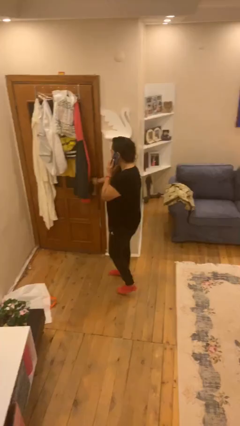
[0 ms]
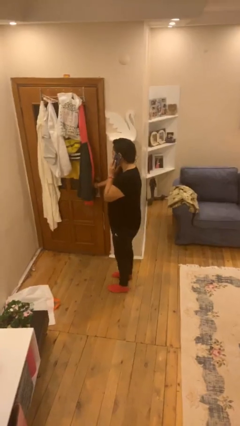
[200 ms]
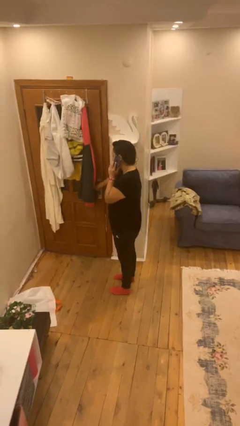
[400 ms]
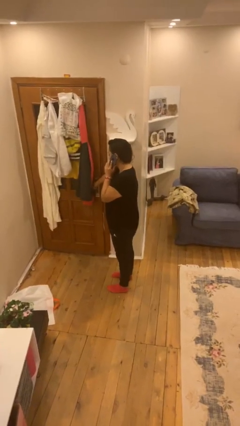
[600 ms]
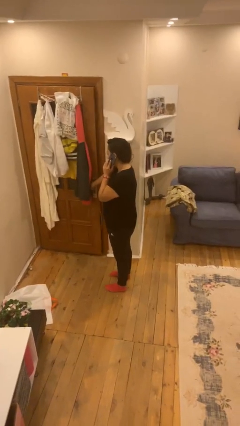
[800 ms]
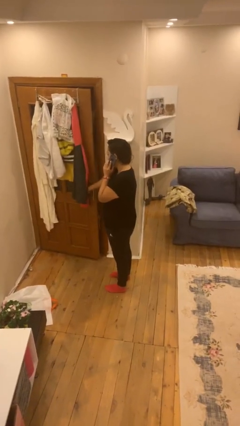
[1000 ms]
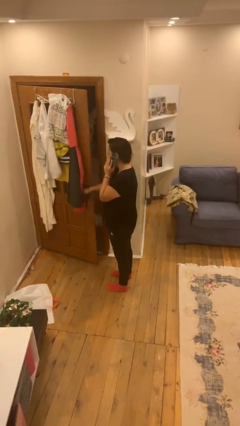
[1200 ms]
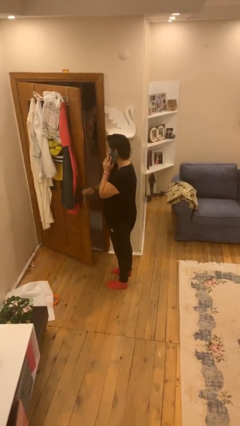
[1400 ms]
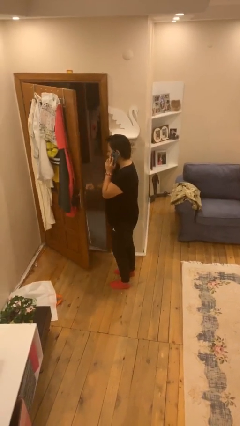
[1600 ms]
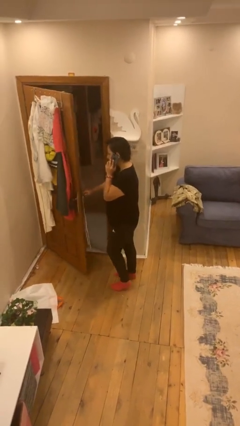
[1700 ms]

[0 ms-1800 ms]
person opens facility door

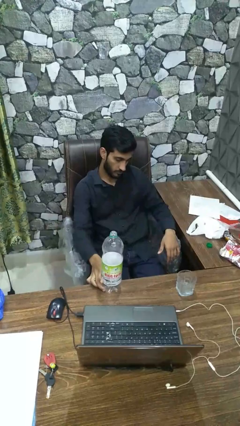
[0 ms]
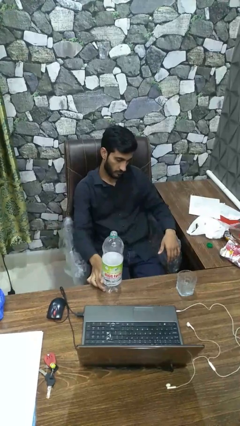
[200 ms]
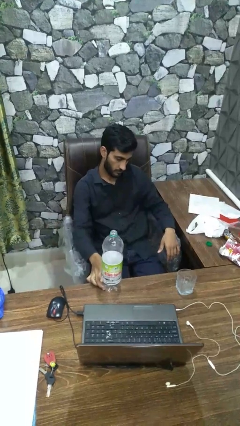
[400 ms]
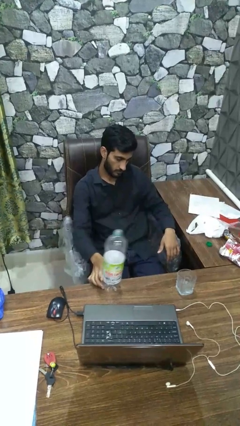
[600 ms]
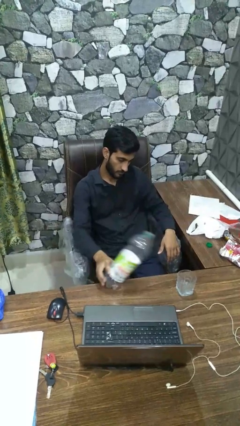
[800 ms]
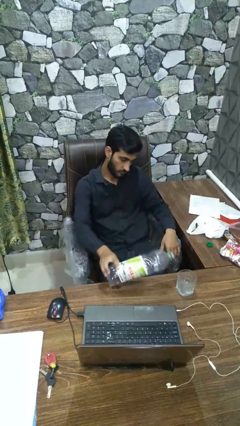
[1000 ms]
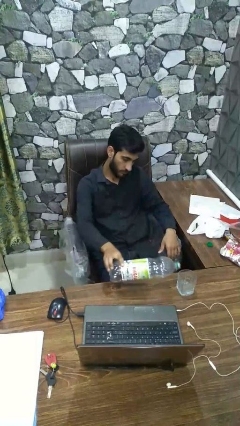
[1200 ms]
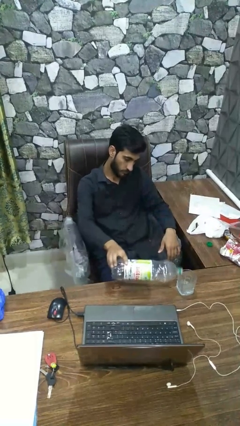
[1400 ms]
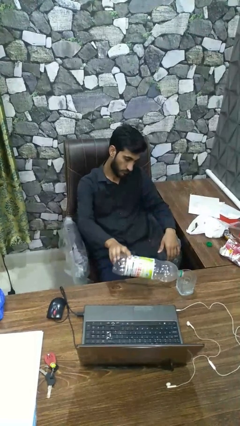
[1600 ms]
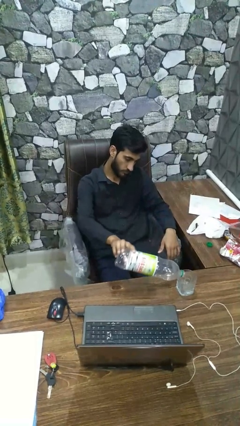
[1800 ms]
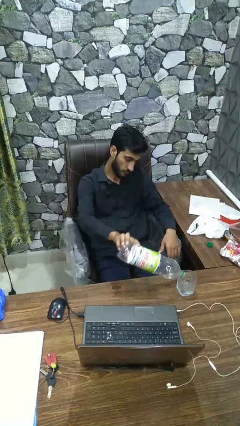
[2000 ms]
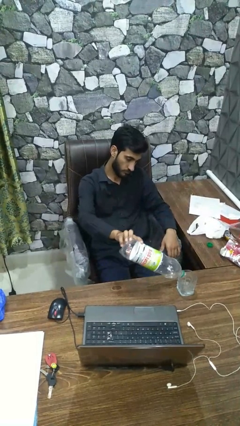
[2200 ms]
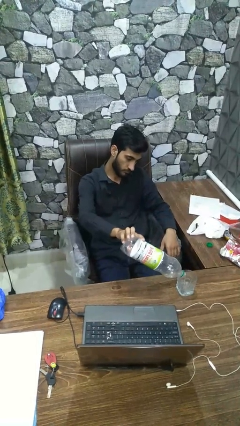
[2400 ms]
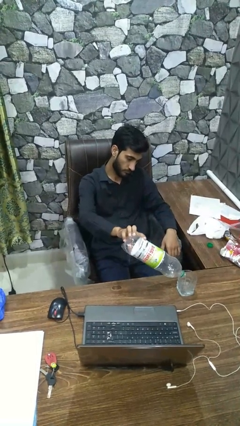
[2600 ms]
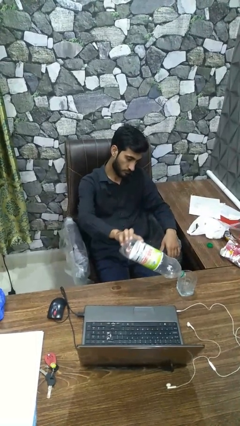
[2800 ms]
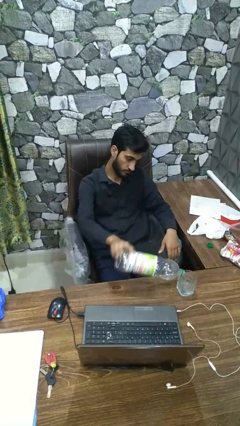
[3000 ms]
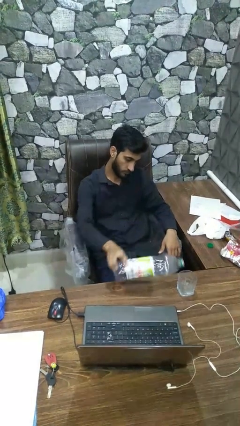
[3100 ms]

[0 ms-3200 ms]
person pours liquid into cup

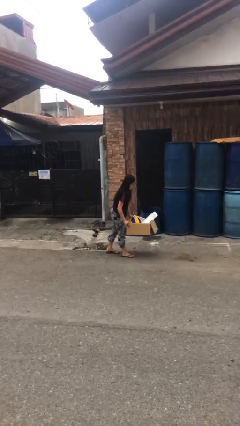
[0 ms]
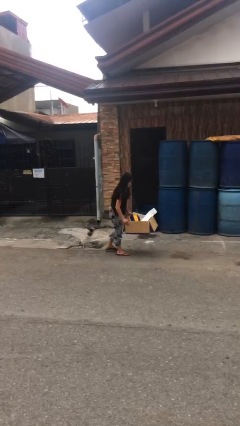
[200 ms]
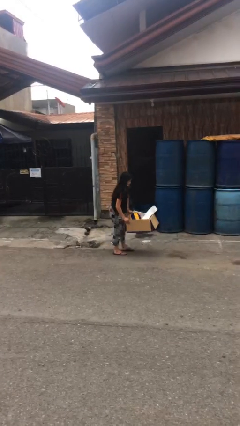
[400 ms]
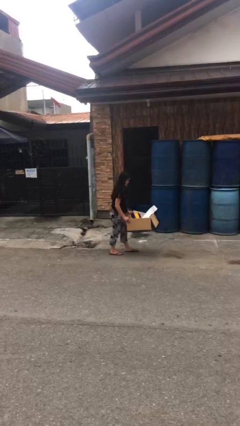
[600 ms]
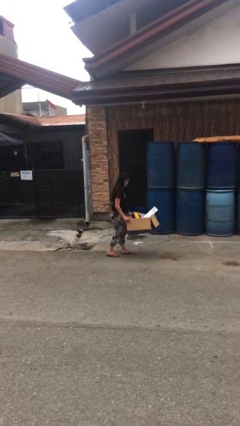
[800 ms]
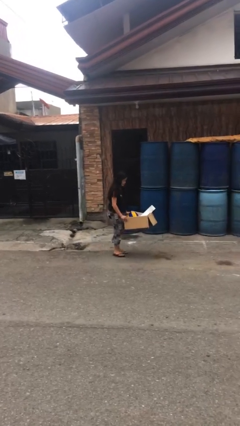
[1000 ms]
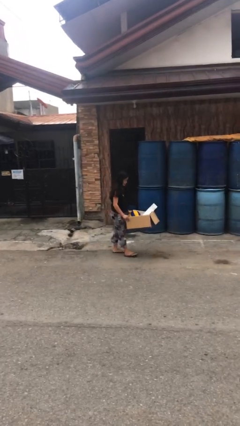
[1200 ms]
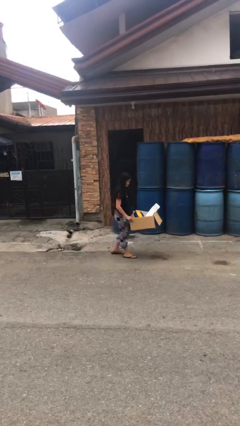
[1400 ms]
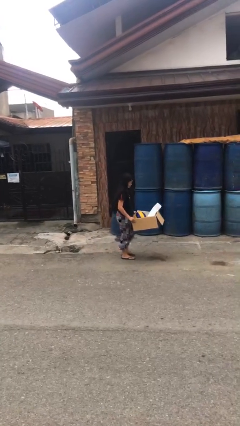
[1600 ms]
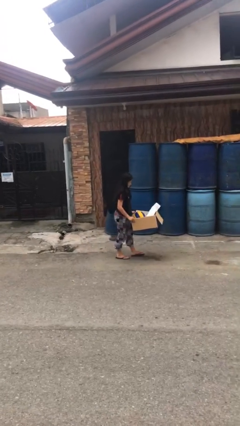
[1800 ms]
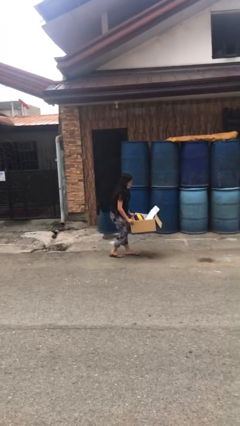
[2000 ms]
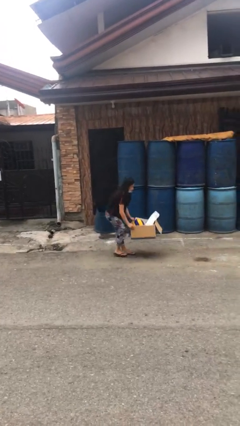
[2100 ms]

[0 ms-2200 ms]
person carries heavy object

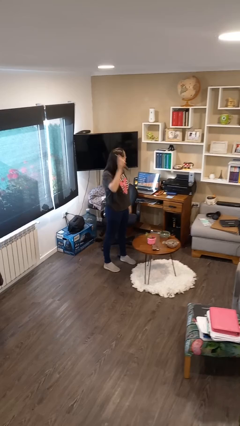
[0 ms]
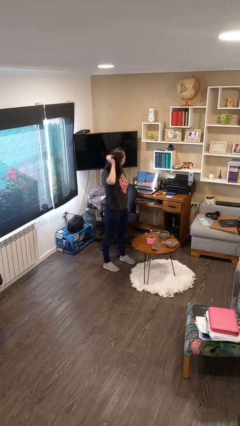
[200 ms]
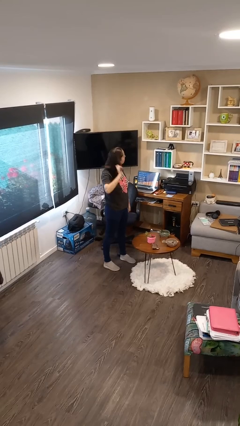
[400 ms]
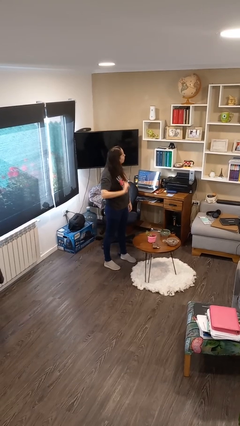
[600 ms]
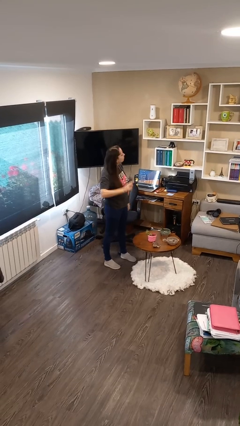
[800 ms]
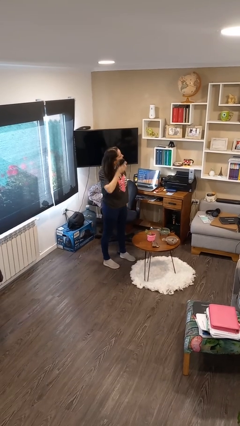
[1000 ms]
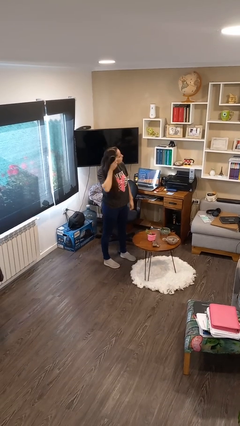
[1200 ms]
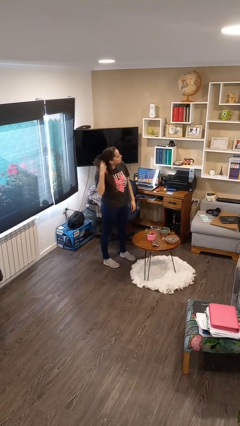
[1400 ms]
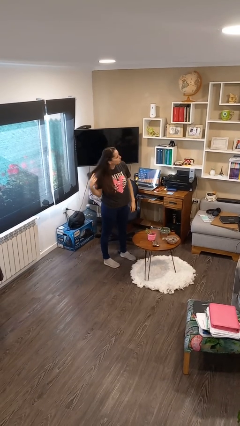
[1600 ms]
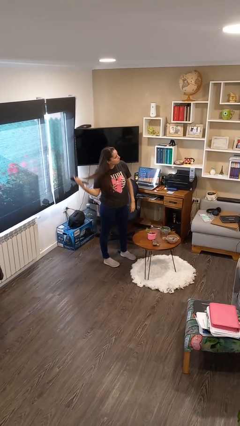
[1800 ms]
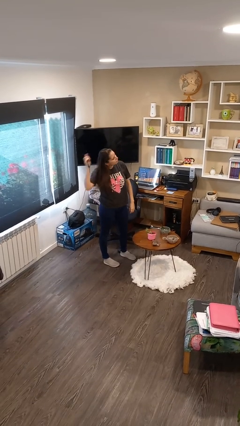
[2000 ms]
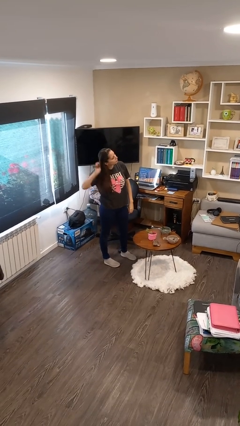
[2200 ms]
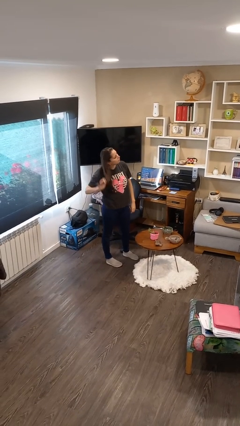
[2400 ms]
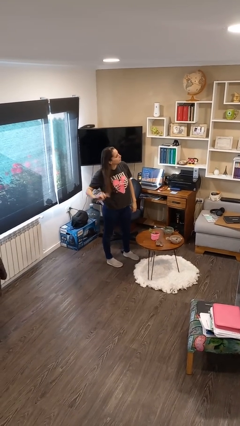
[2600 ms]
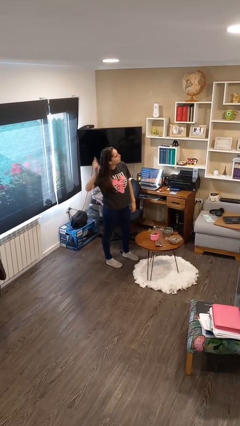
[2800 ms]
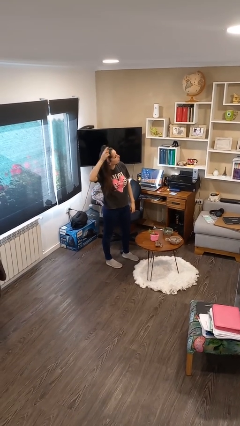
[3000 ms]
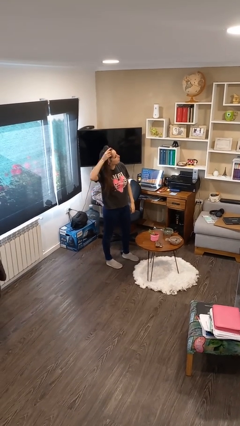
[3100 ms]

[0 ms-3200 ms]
person brushes hair

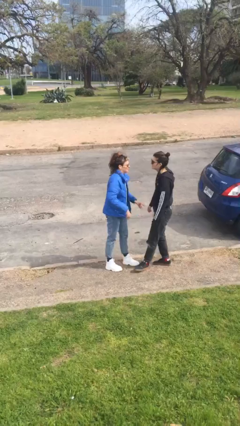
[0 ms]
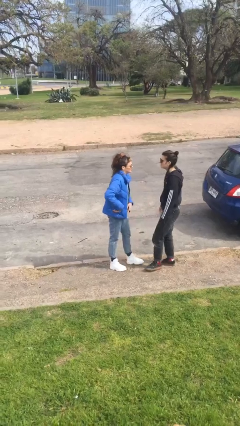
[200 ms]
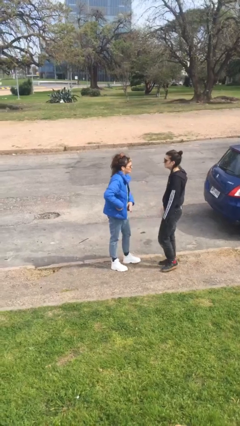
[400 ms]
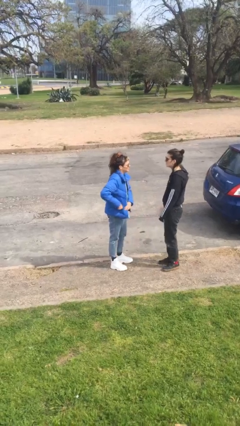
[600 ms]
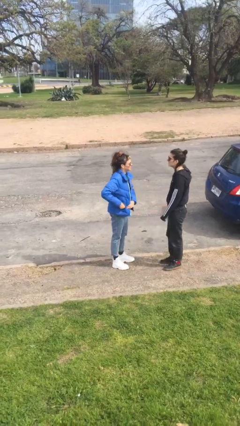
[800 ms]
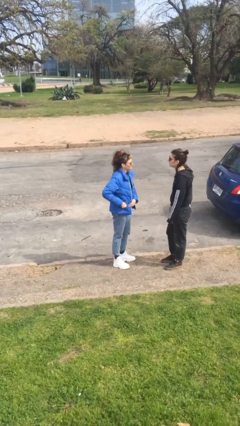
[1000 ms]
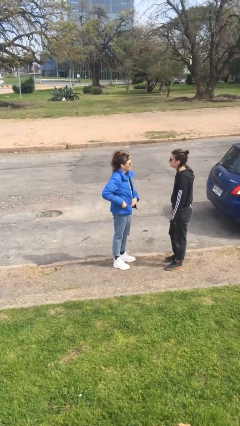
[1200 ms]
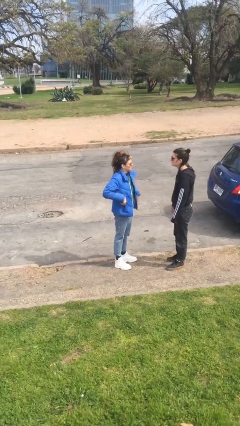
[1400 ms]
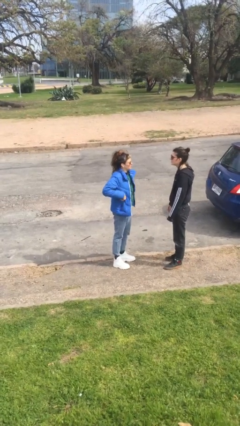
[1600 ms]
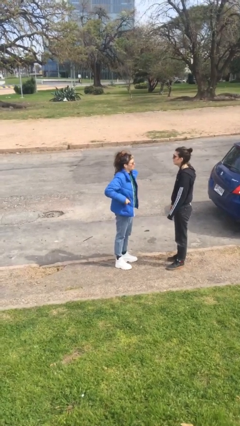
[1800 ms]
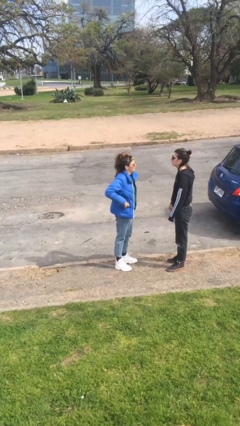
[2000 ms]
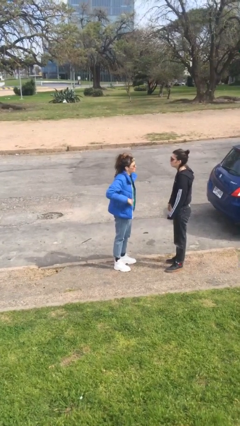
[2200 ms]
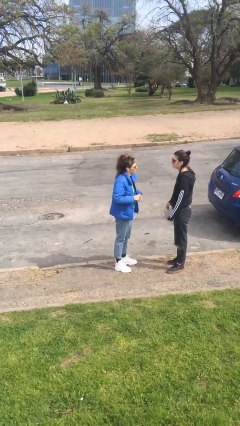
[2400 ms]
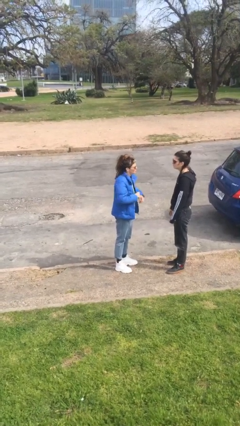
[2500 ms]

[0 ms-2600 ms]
person talks to person

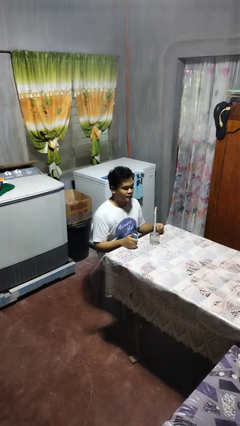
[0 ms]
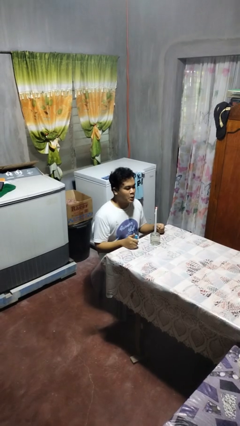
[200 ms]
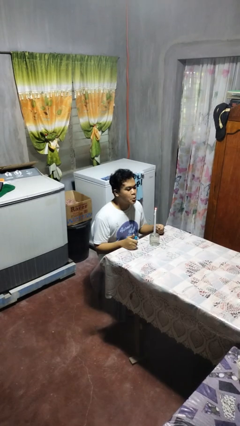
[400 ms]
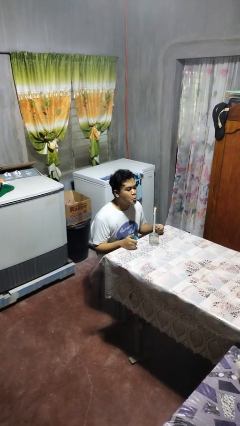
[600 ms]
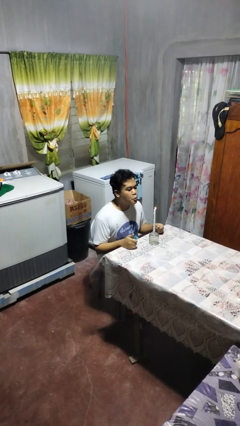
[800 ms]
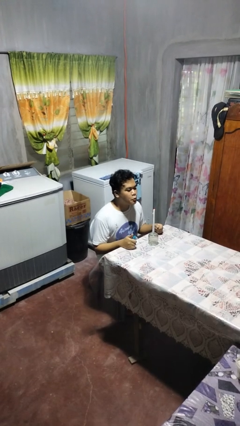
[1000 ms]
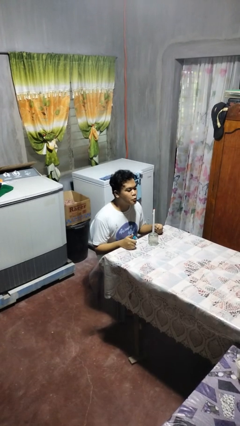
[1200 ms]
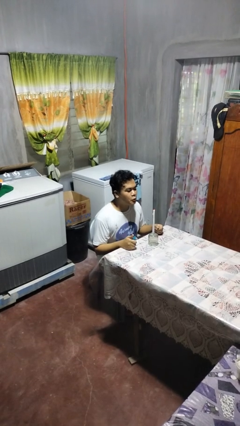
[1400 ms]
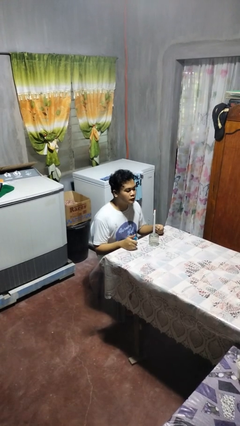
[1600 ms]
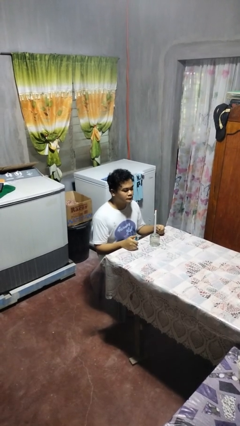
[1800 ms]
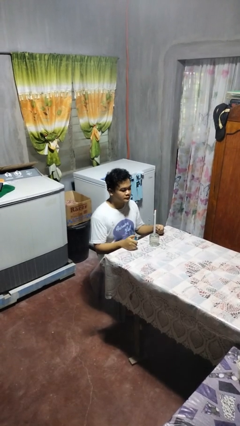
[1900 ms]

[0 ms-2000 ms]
person extinguishes candle

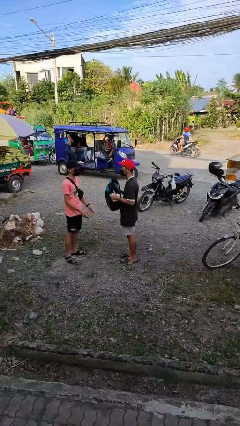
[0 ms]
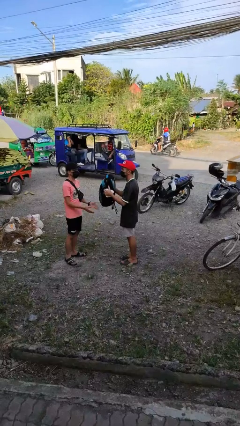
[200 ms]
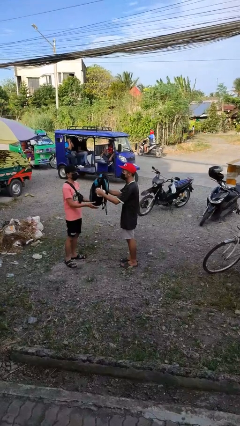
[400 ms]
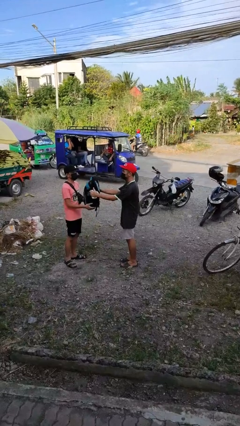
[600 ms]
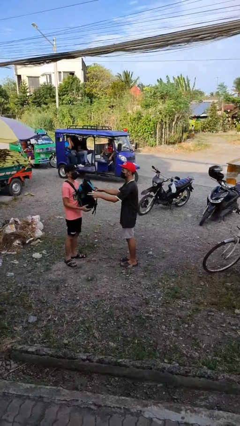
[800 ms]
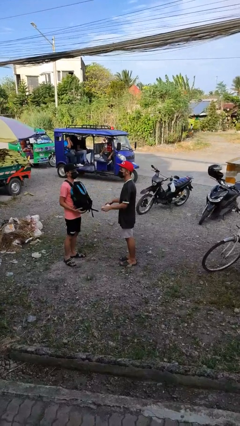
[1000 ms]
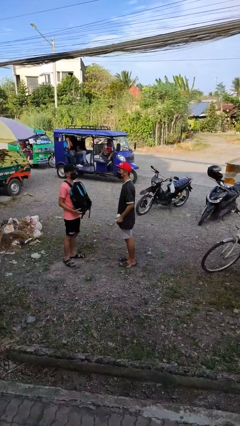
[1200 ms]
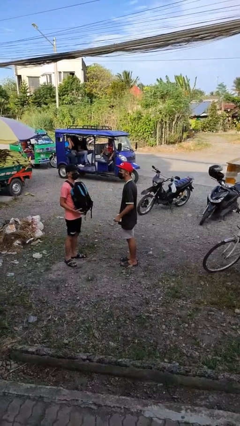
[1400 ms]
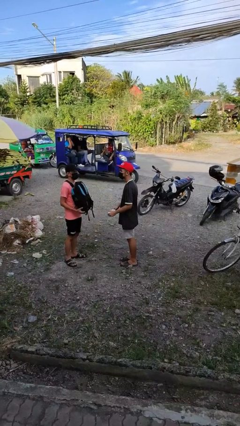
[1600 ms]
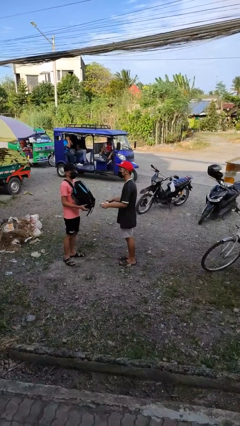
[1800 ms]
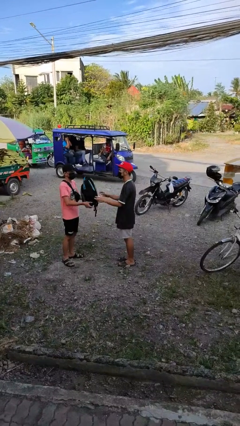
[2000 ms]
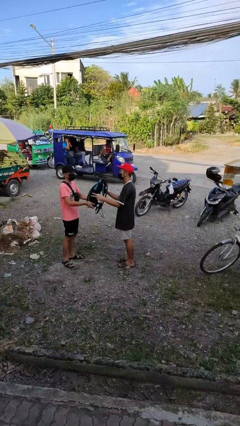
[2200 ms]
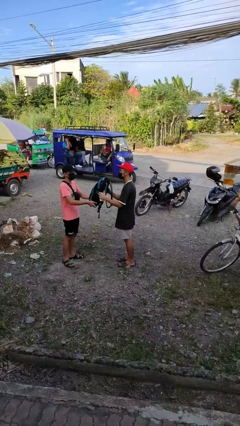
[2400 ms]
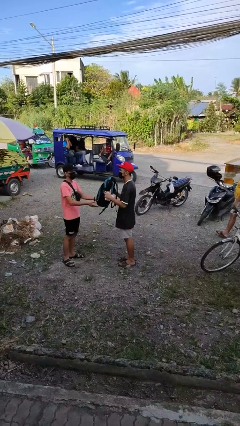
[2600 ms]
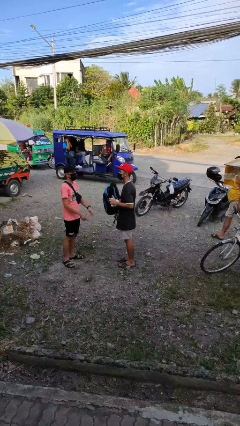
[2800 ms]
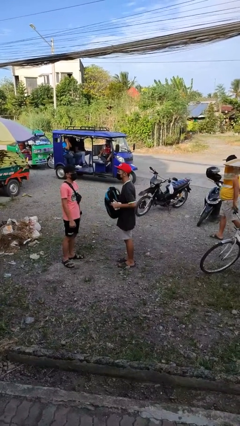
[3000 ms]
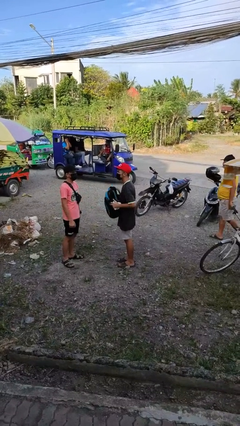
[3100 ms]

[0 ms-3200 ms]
person transfers object to person
